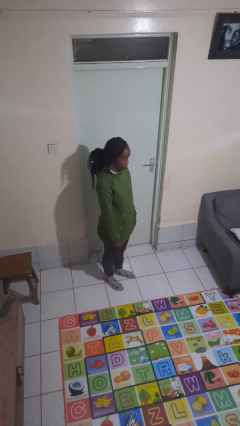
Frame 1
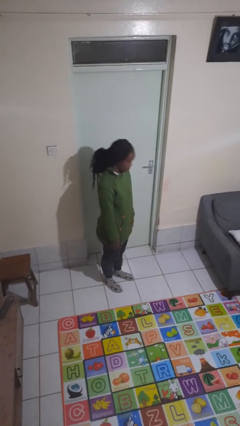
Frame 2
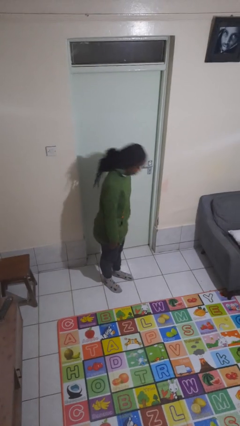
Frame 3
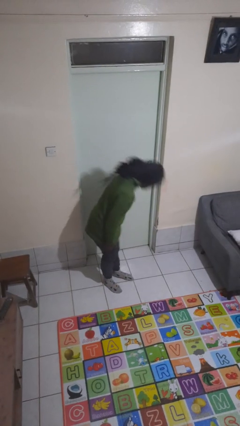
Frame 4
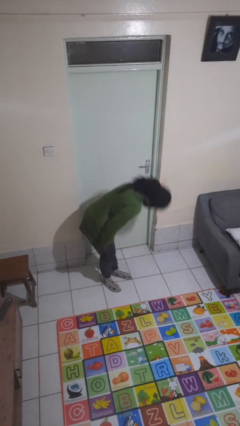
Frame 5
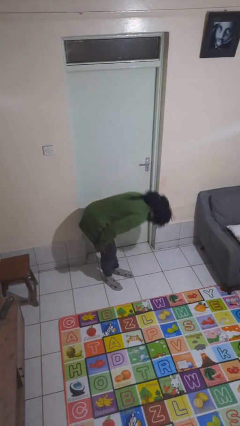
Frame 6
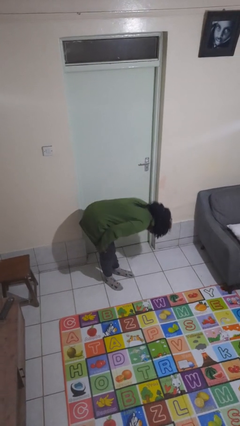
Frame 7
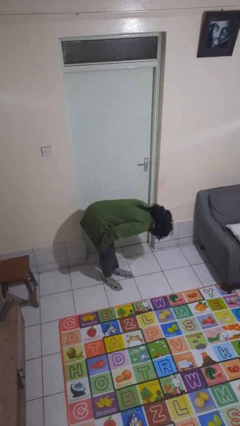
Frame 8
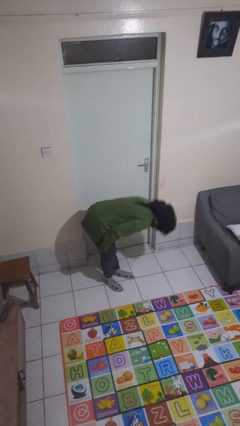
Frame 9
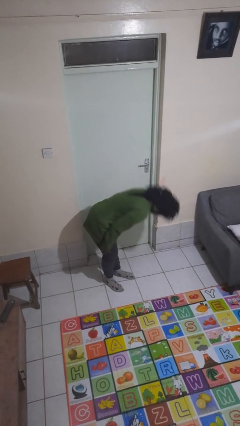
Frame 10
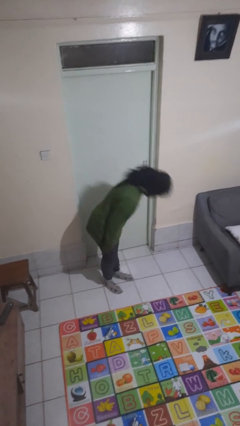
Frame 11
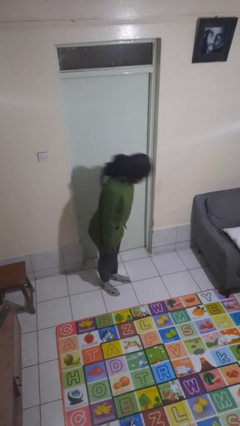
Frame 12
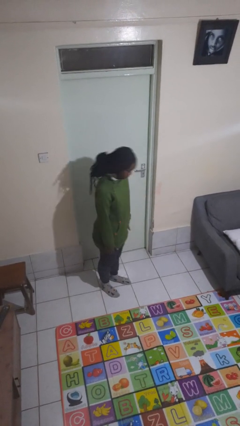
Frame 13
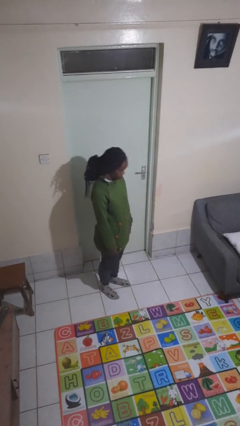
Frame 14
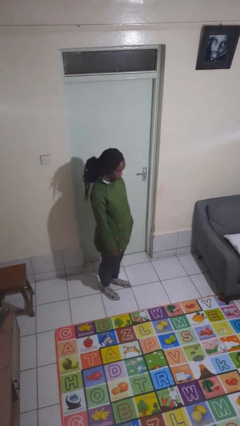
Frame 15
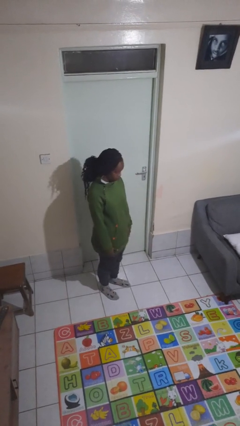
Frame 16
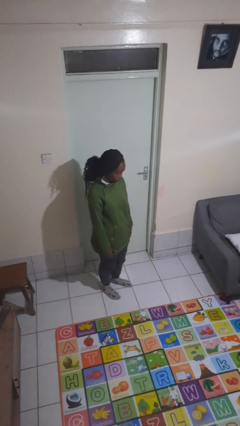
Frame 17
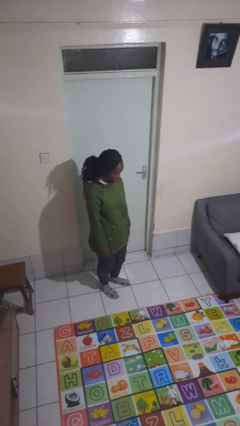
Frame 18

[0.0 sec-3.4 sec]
person bows

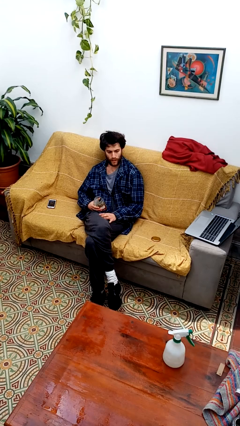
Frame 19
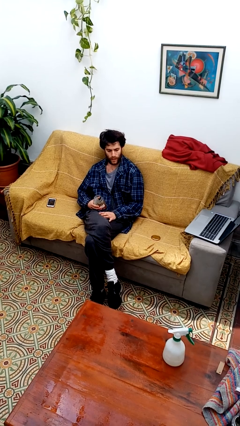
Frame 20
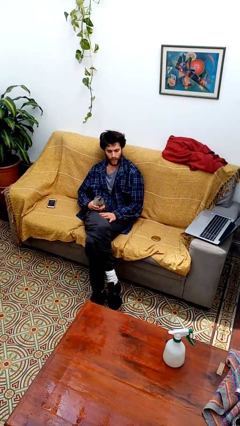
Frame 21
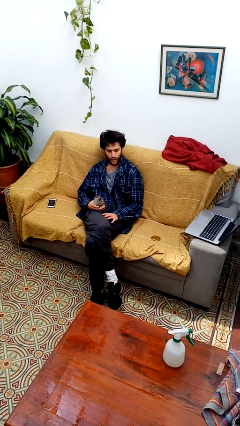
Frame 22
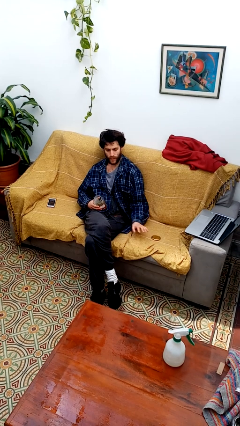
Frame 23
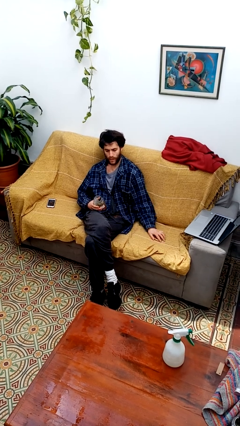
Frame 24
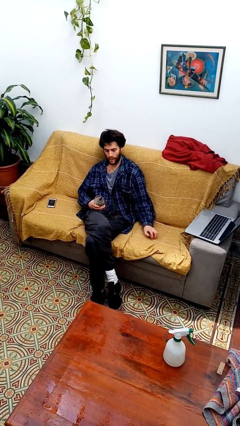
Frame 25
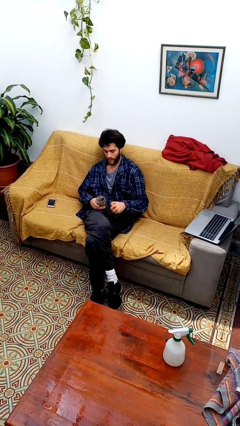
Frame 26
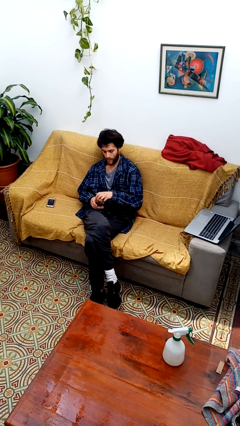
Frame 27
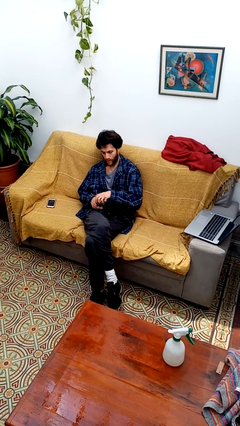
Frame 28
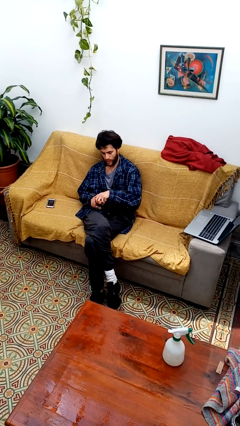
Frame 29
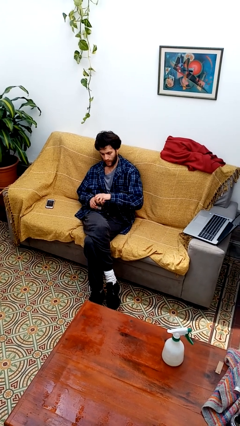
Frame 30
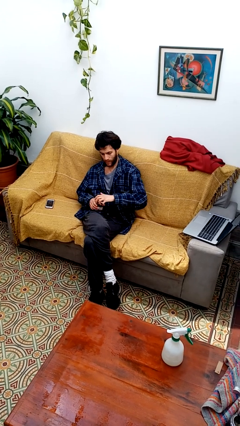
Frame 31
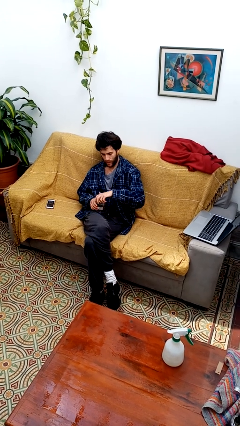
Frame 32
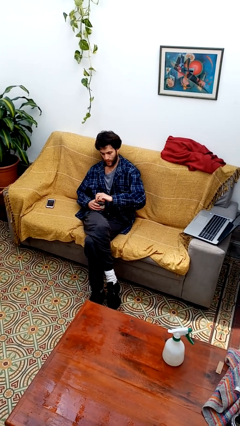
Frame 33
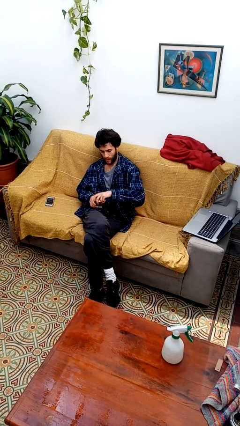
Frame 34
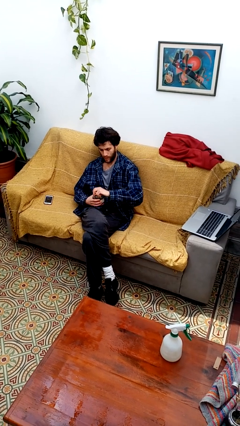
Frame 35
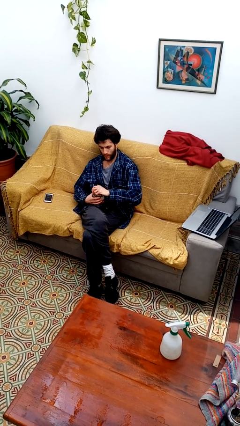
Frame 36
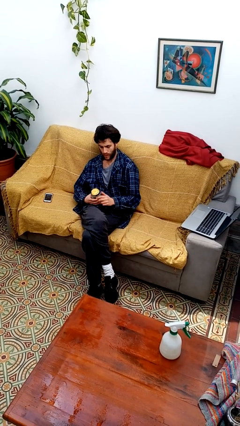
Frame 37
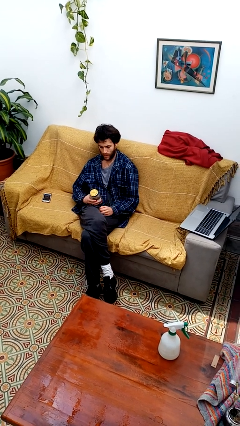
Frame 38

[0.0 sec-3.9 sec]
person closes jar

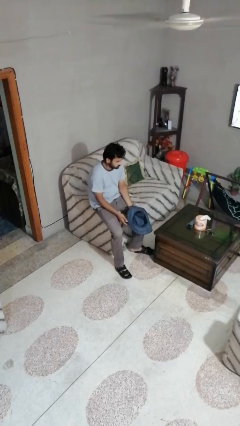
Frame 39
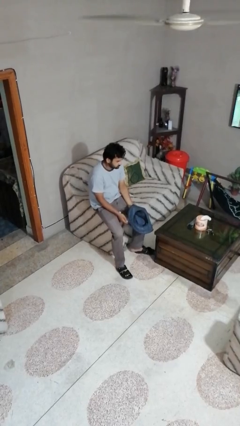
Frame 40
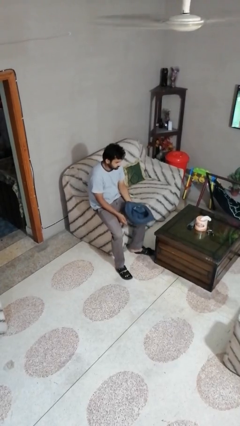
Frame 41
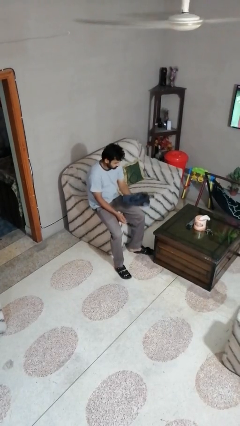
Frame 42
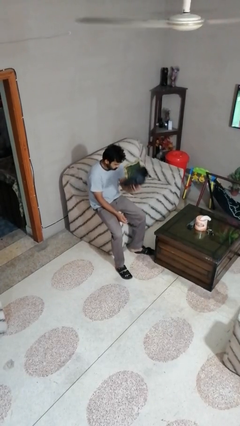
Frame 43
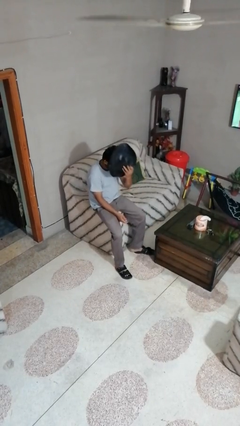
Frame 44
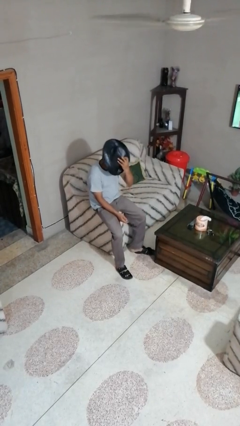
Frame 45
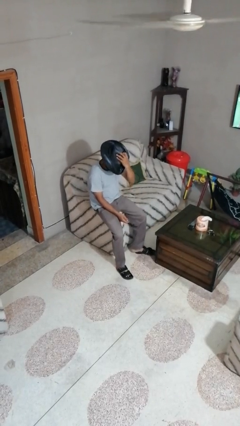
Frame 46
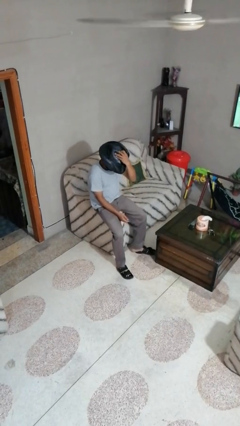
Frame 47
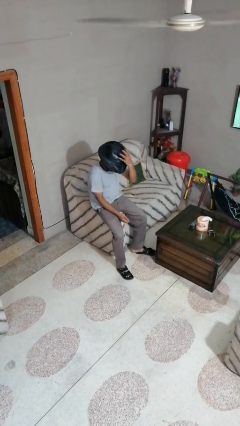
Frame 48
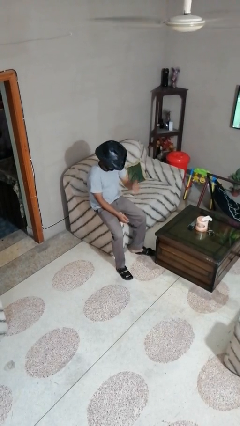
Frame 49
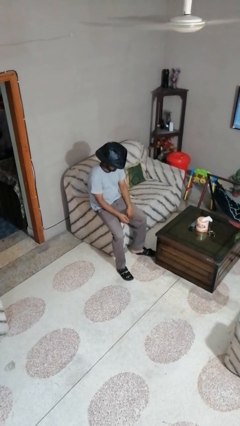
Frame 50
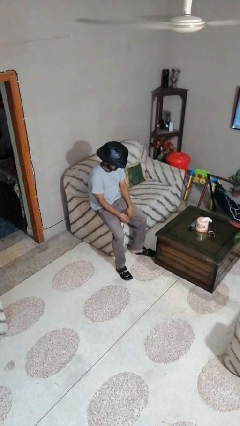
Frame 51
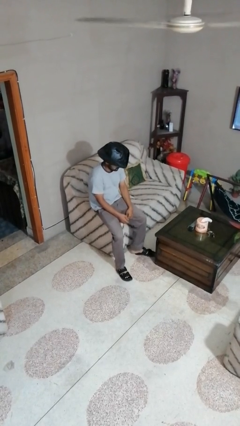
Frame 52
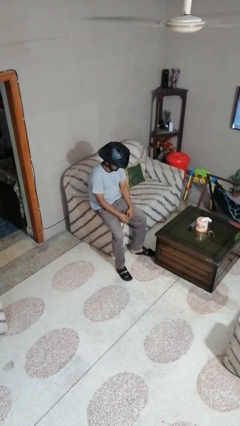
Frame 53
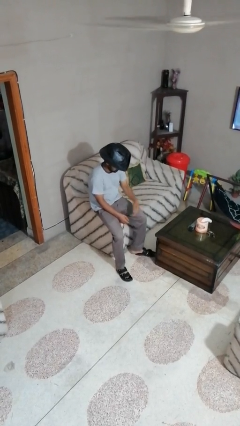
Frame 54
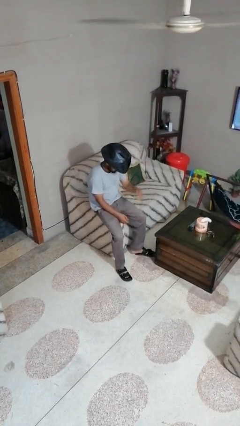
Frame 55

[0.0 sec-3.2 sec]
person puts on hat

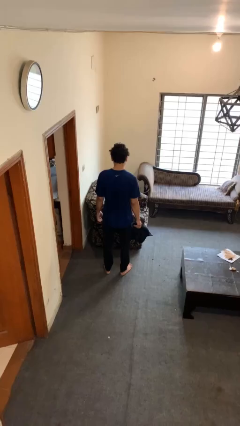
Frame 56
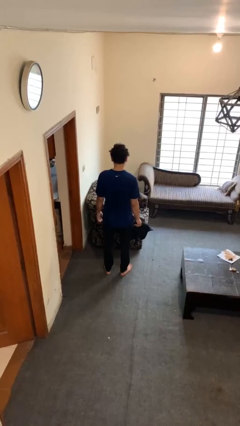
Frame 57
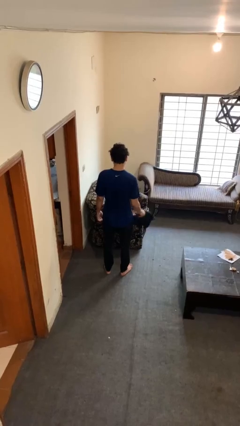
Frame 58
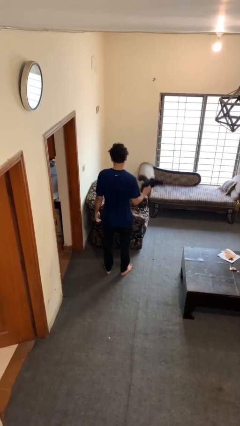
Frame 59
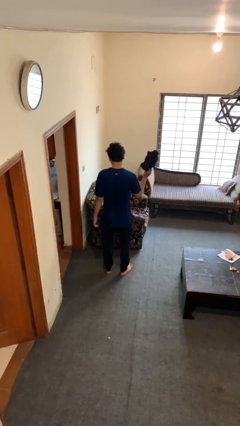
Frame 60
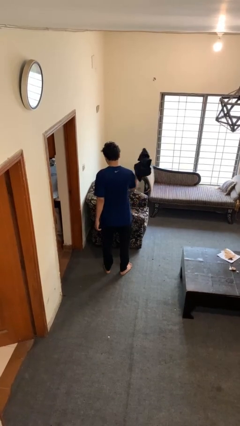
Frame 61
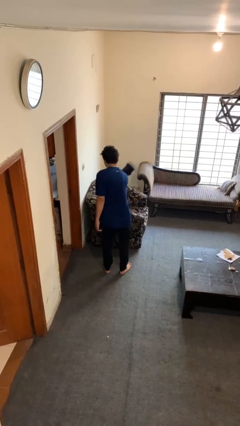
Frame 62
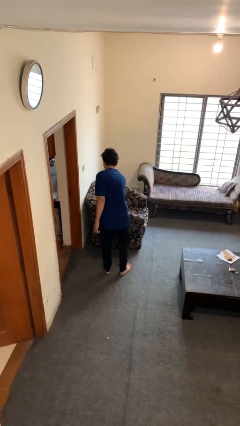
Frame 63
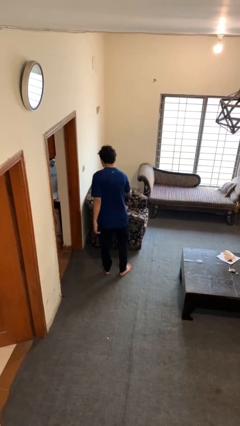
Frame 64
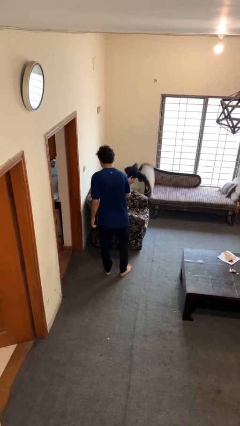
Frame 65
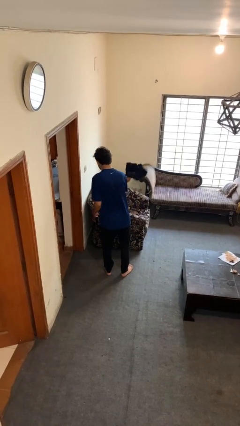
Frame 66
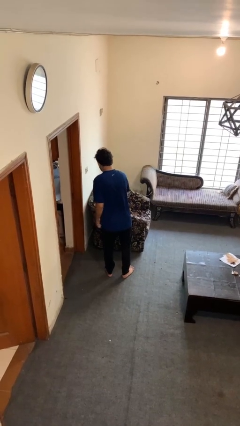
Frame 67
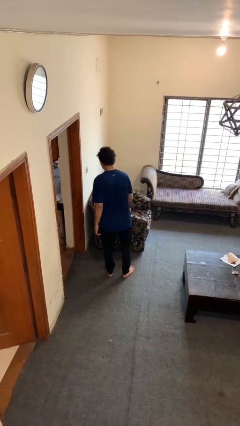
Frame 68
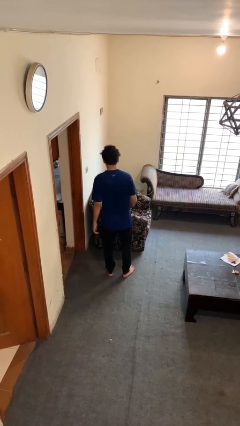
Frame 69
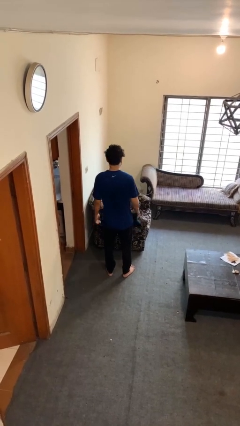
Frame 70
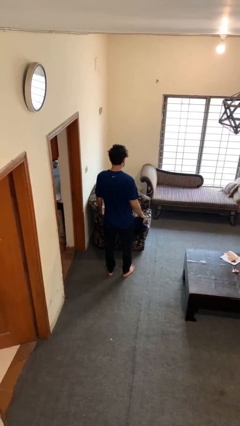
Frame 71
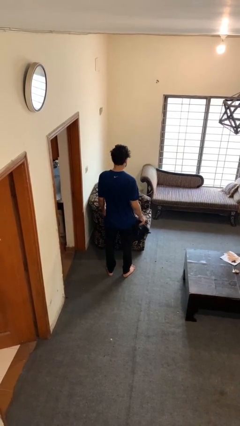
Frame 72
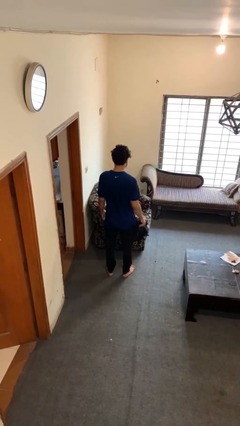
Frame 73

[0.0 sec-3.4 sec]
person dusts furniture

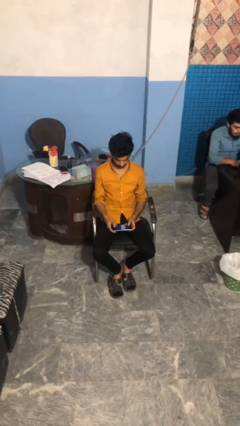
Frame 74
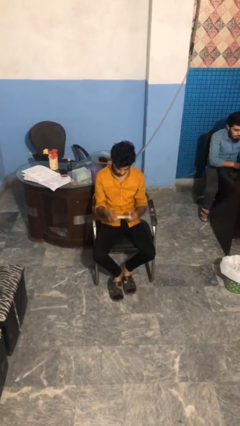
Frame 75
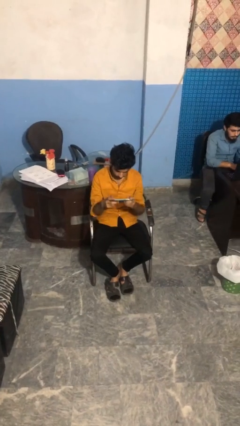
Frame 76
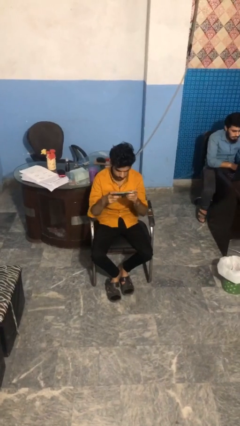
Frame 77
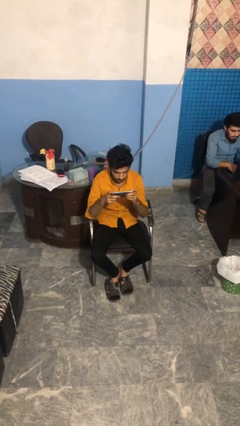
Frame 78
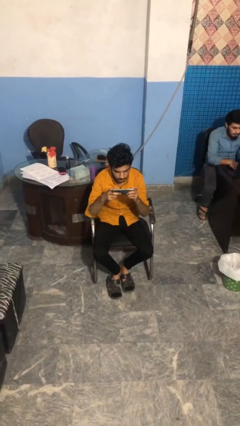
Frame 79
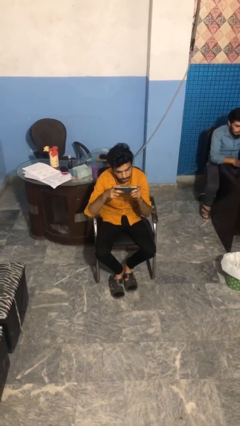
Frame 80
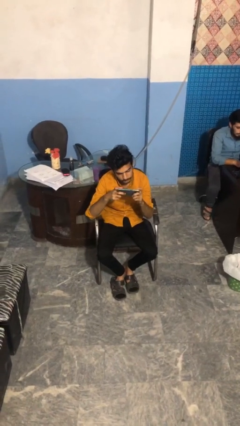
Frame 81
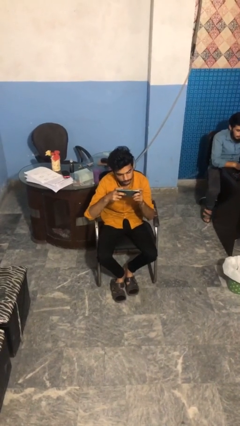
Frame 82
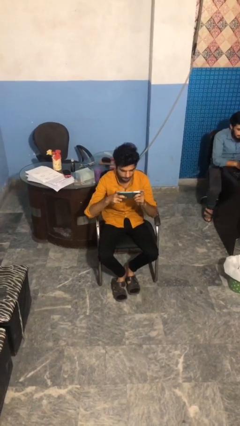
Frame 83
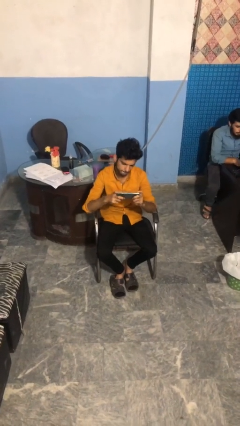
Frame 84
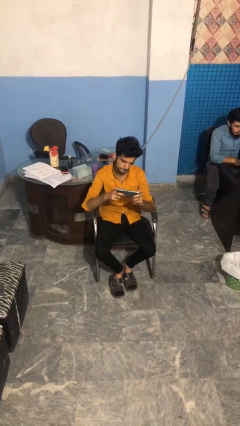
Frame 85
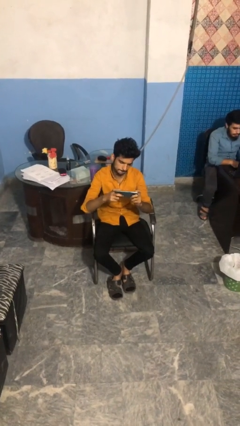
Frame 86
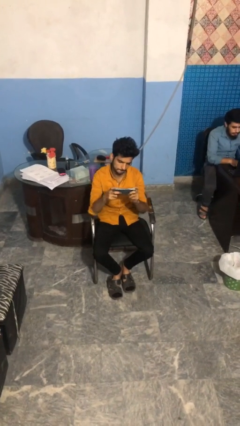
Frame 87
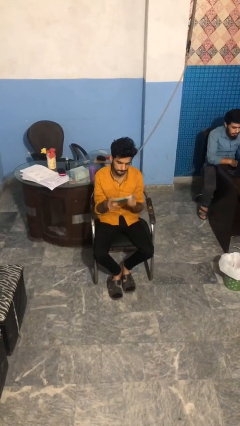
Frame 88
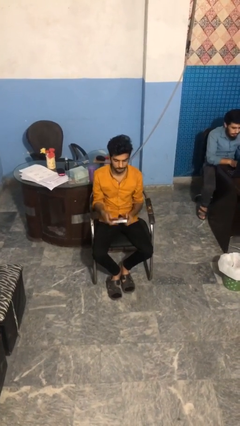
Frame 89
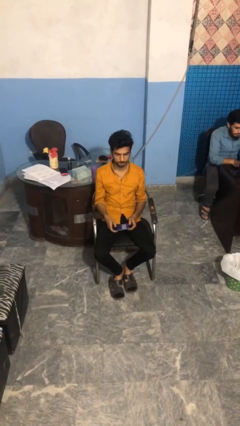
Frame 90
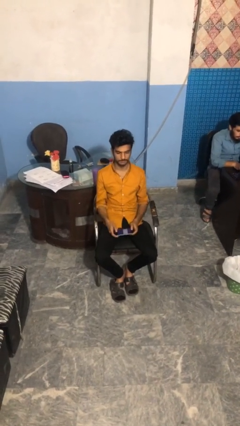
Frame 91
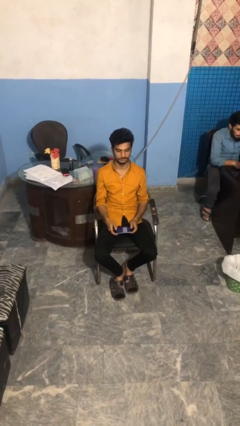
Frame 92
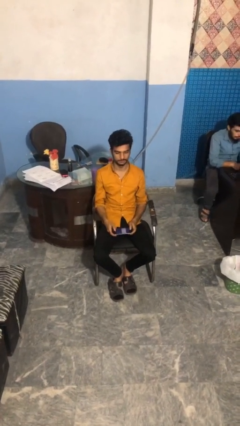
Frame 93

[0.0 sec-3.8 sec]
person interacts with handheld game
